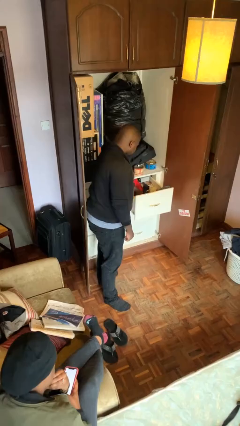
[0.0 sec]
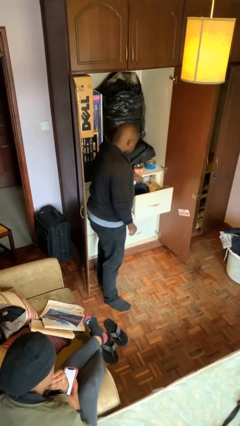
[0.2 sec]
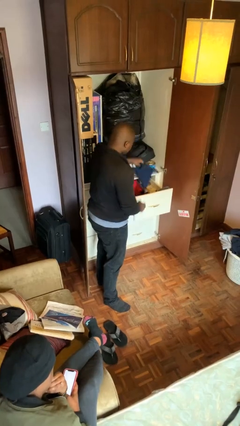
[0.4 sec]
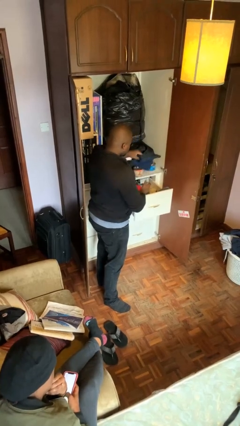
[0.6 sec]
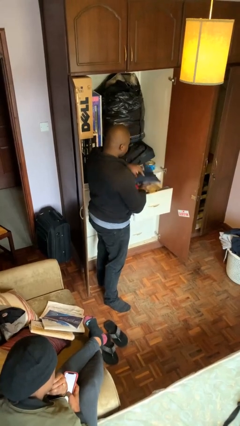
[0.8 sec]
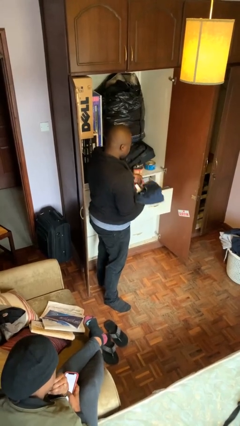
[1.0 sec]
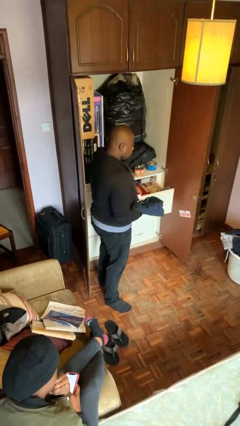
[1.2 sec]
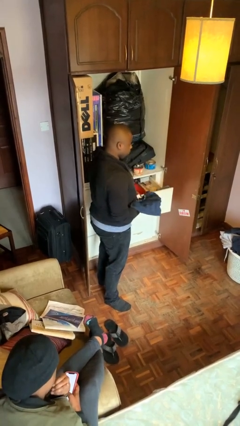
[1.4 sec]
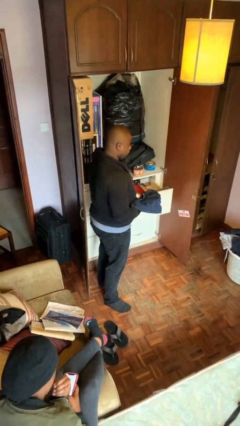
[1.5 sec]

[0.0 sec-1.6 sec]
person takes clothes from dresser

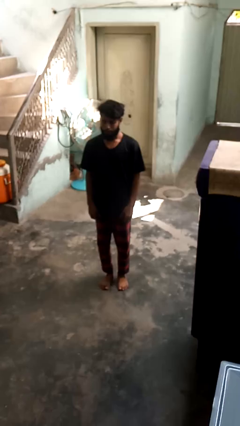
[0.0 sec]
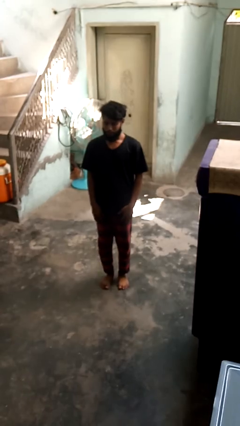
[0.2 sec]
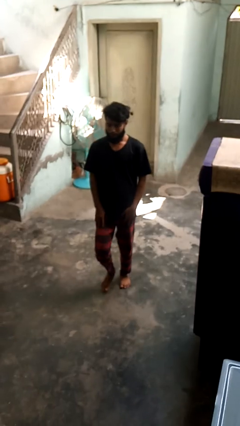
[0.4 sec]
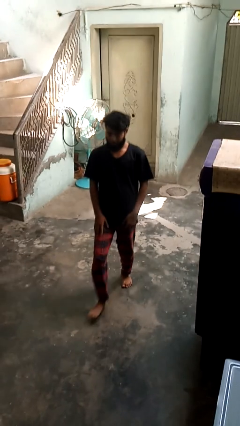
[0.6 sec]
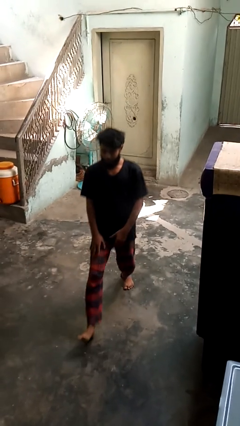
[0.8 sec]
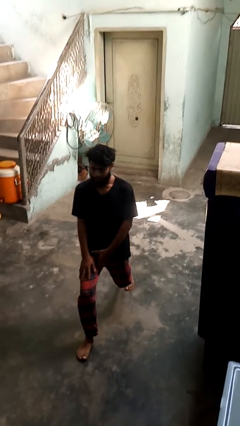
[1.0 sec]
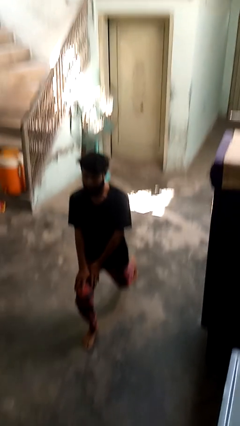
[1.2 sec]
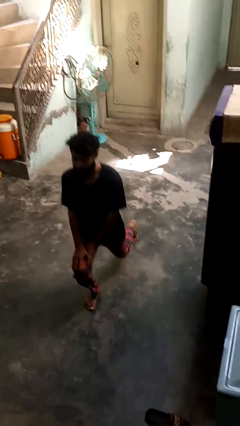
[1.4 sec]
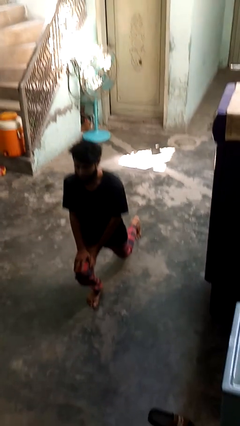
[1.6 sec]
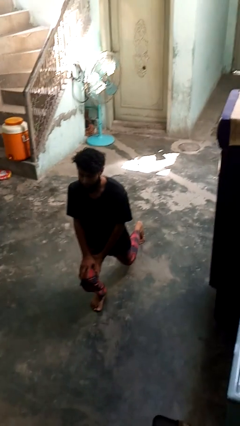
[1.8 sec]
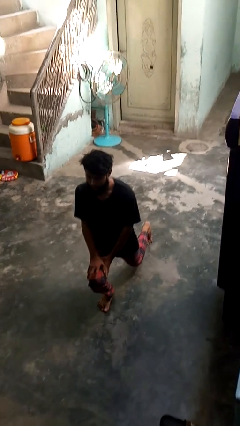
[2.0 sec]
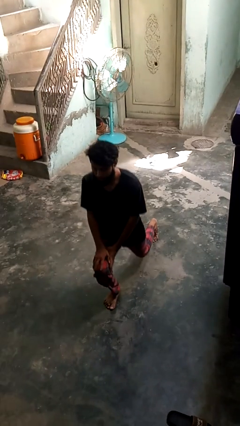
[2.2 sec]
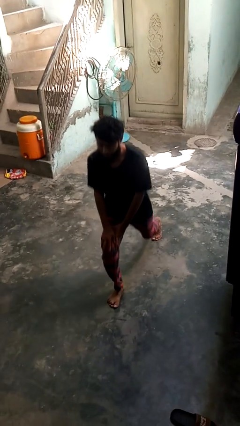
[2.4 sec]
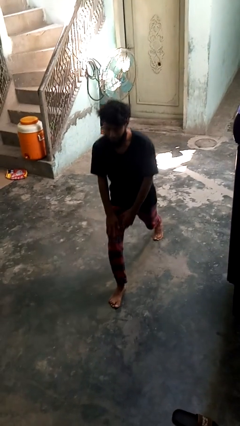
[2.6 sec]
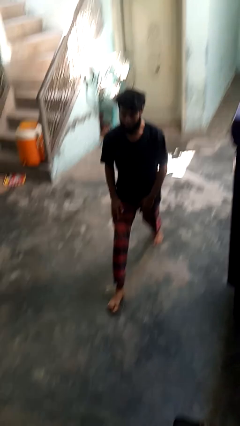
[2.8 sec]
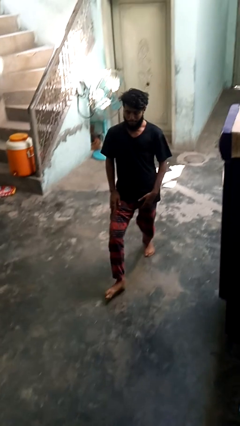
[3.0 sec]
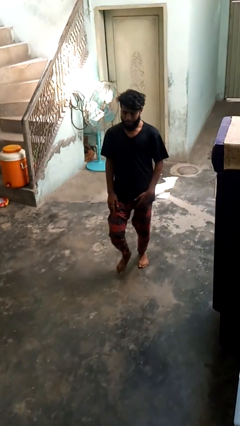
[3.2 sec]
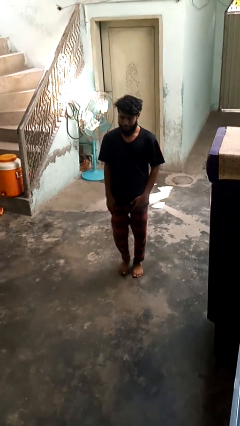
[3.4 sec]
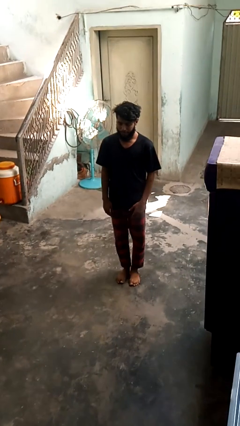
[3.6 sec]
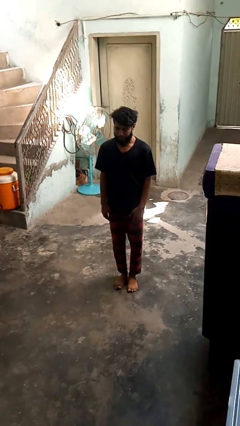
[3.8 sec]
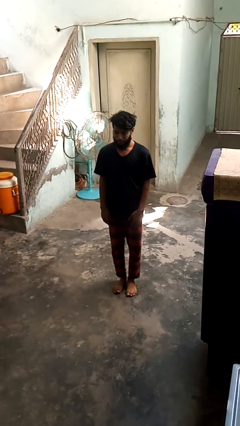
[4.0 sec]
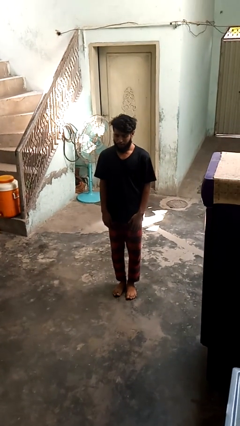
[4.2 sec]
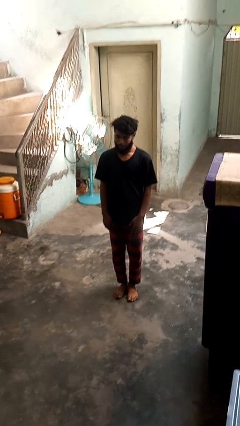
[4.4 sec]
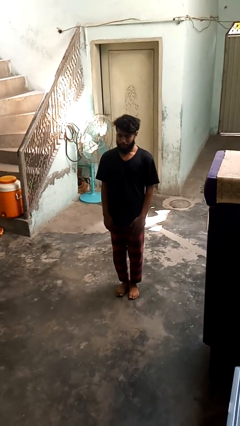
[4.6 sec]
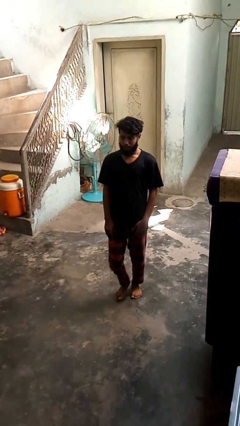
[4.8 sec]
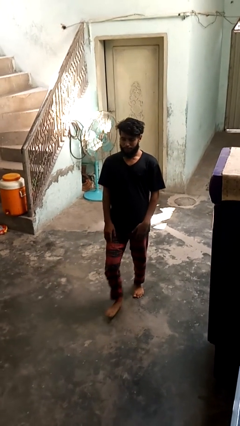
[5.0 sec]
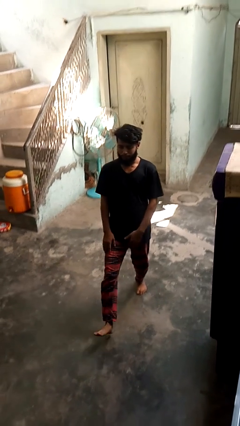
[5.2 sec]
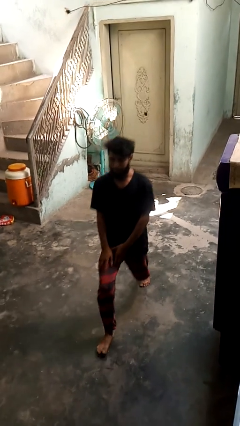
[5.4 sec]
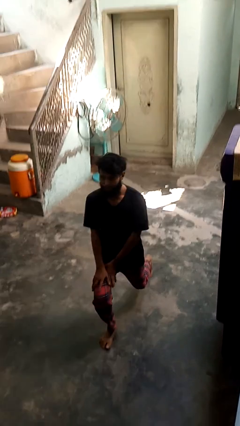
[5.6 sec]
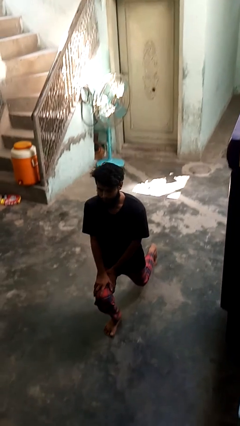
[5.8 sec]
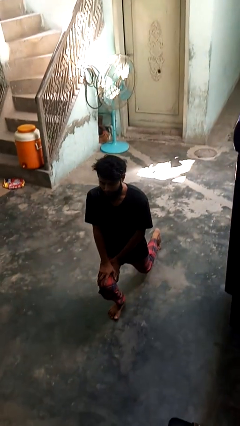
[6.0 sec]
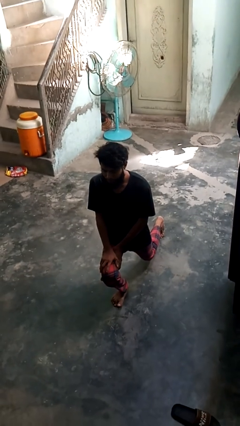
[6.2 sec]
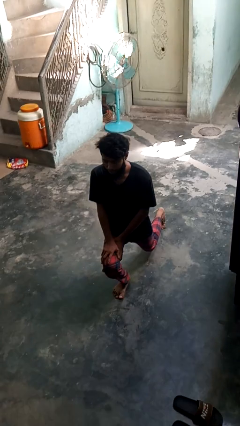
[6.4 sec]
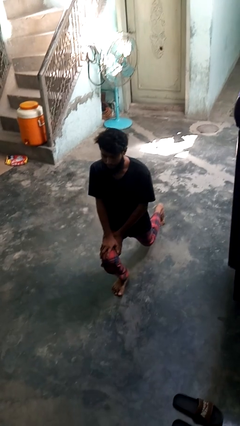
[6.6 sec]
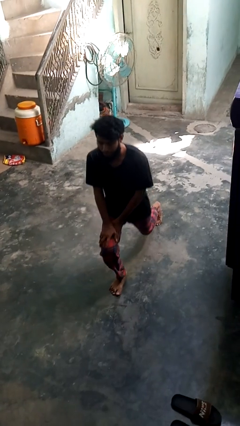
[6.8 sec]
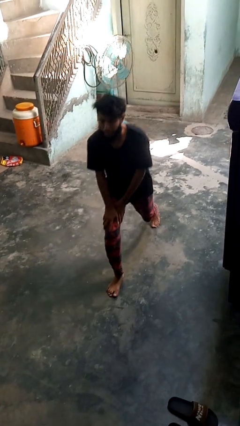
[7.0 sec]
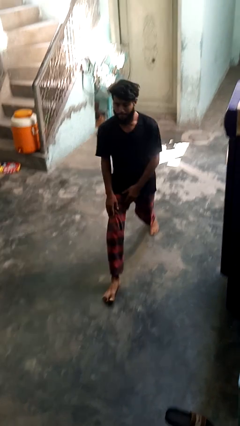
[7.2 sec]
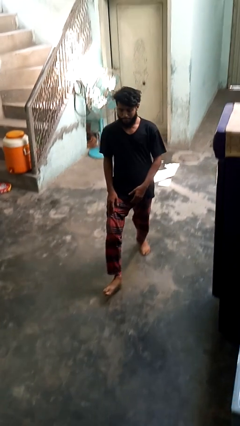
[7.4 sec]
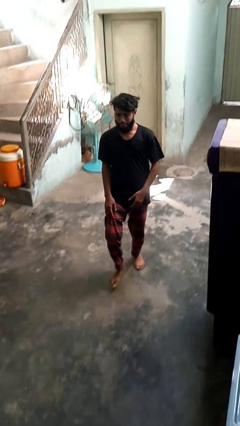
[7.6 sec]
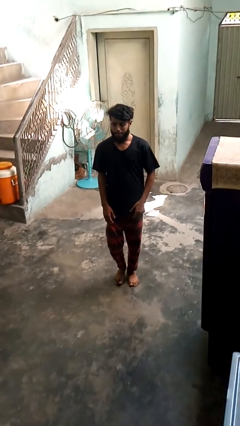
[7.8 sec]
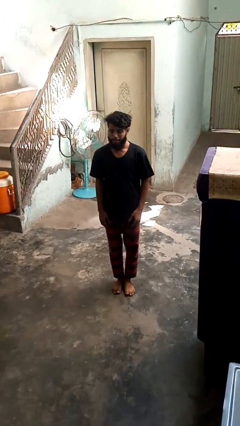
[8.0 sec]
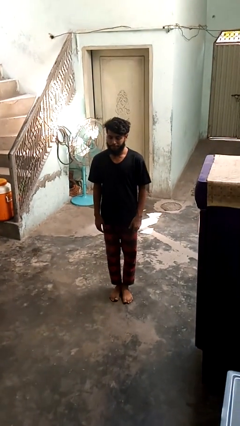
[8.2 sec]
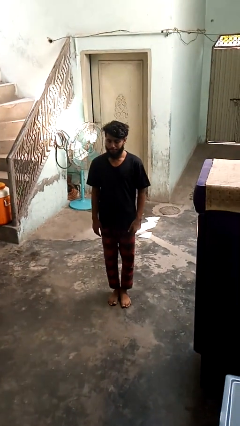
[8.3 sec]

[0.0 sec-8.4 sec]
person exercises with lunges

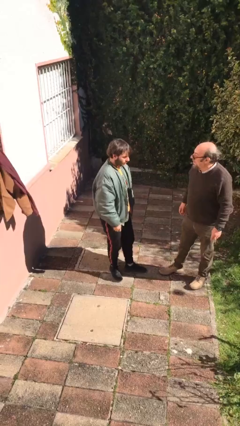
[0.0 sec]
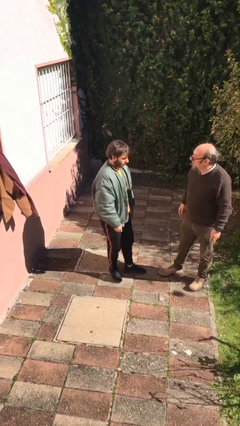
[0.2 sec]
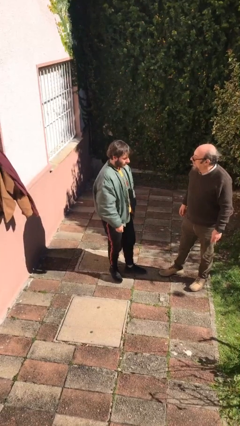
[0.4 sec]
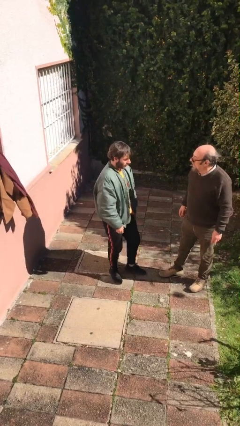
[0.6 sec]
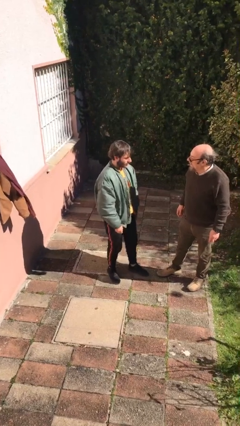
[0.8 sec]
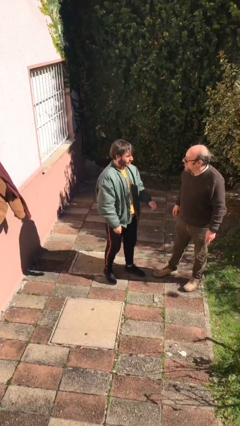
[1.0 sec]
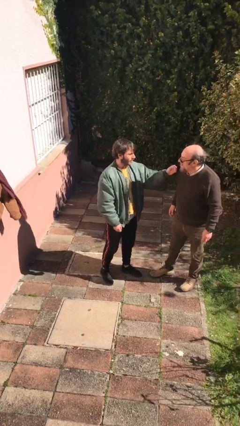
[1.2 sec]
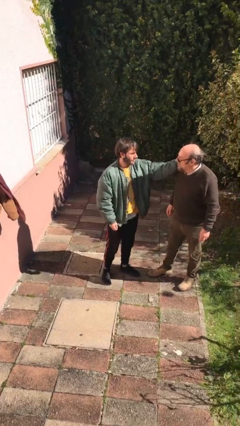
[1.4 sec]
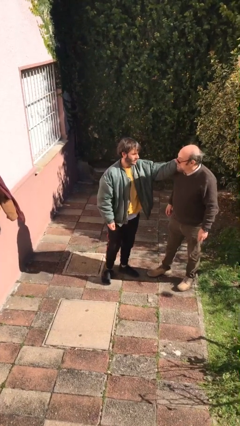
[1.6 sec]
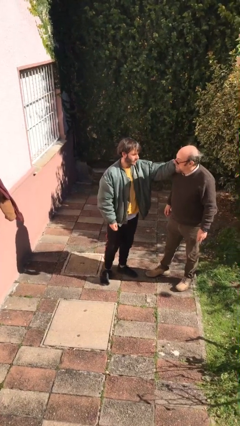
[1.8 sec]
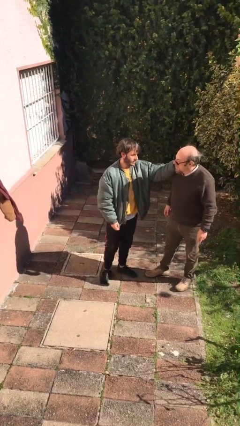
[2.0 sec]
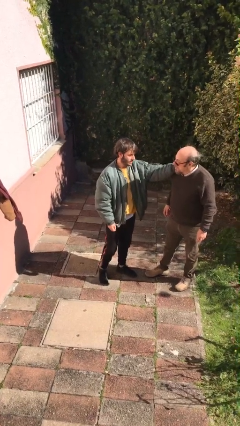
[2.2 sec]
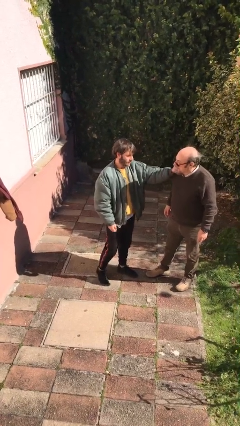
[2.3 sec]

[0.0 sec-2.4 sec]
person touches face of person

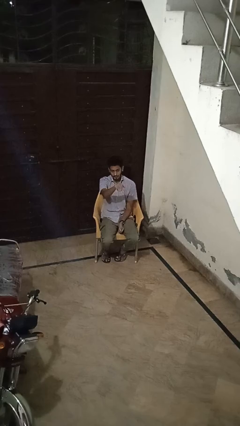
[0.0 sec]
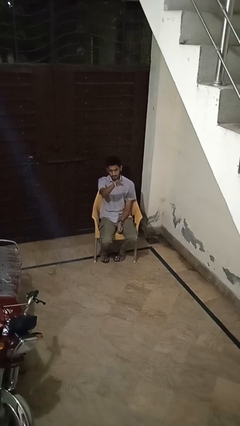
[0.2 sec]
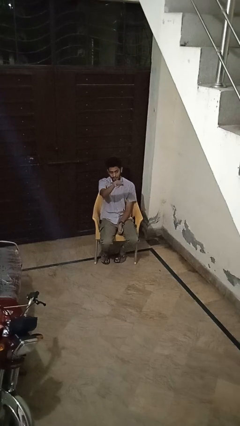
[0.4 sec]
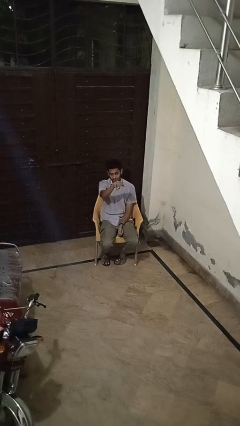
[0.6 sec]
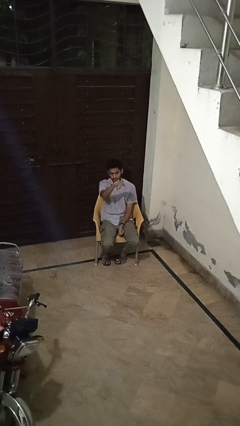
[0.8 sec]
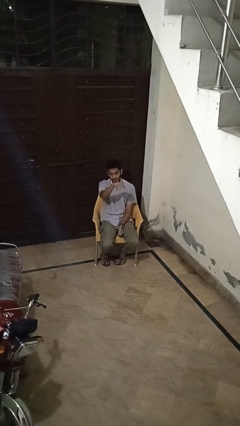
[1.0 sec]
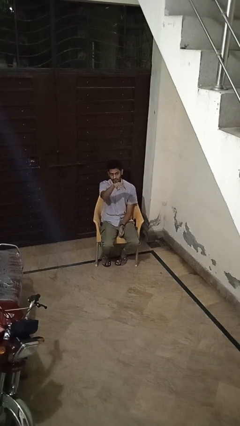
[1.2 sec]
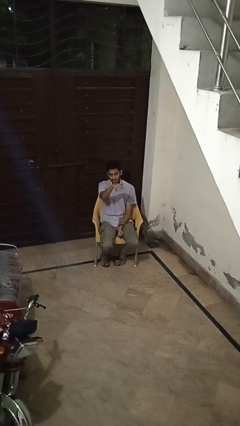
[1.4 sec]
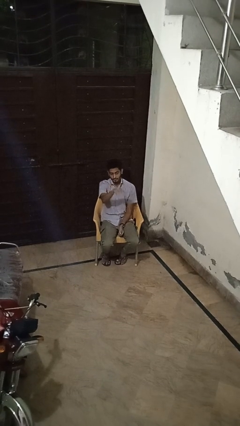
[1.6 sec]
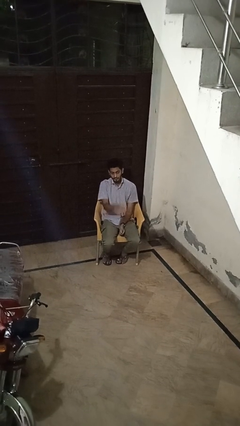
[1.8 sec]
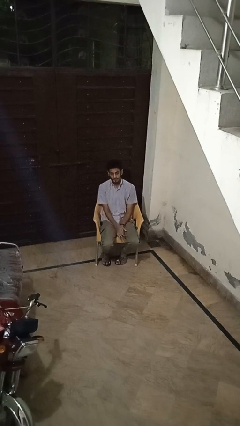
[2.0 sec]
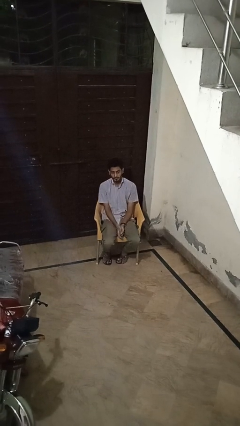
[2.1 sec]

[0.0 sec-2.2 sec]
person gestures come here

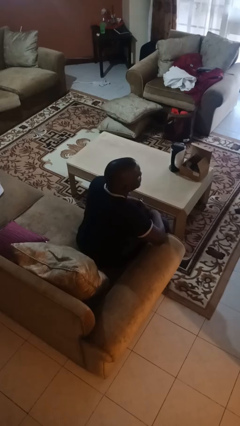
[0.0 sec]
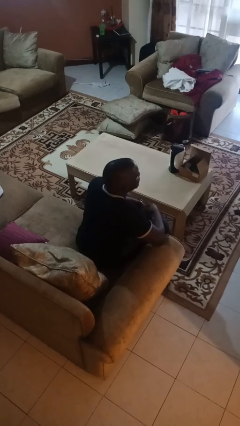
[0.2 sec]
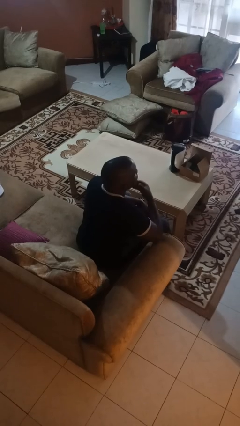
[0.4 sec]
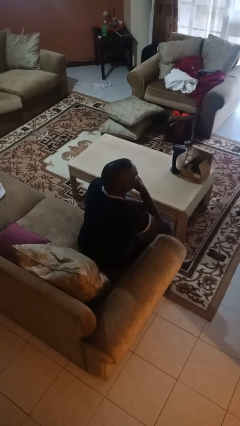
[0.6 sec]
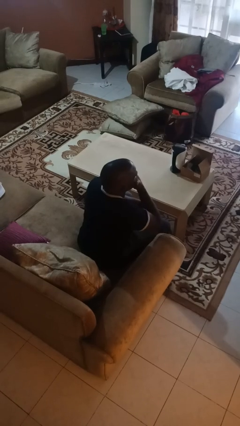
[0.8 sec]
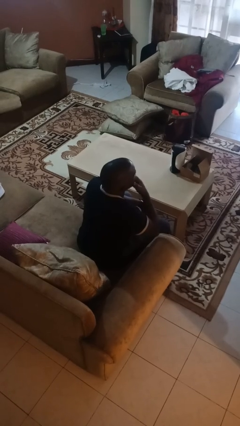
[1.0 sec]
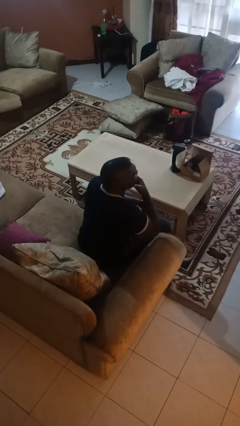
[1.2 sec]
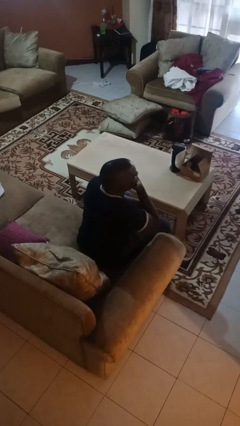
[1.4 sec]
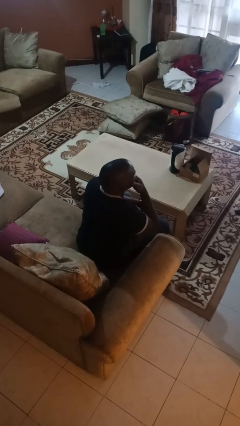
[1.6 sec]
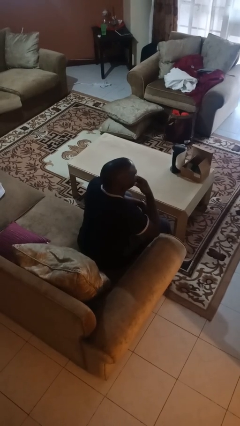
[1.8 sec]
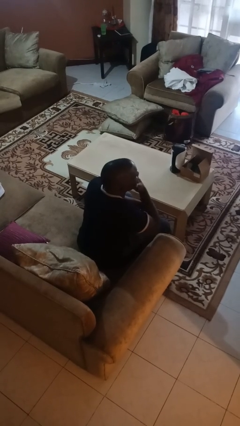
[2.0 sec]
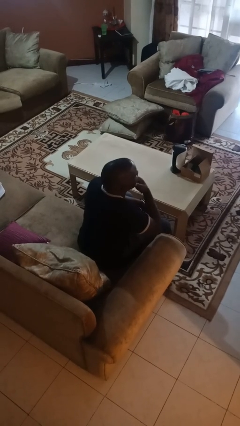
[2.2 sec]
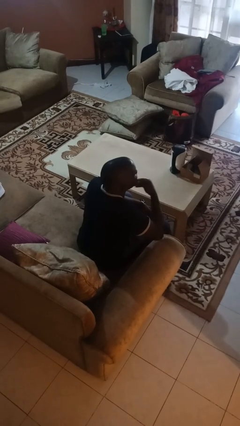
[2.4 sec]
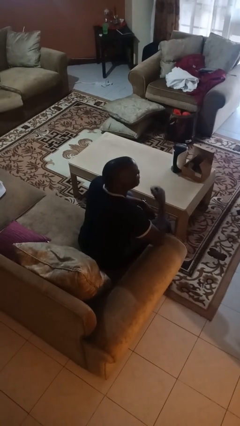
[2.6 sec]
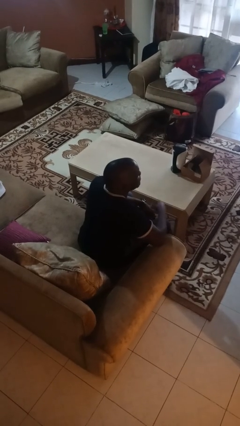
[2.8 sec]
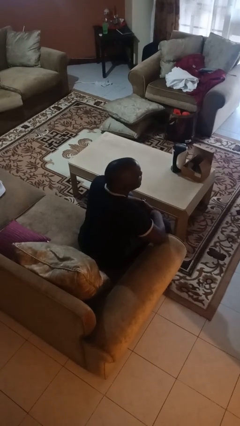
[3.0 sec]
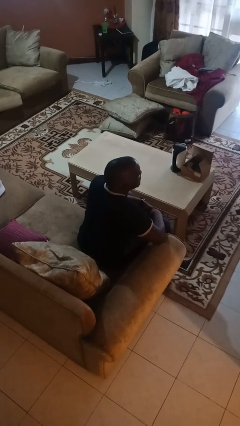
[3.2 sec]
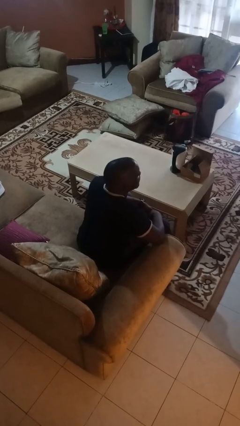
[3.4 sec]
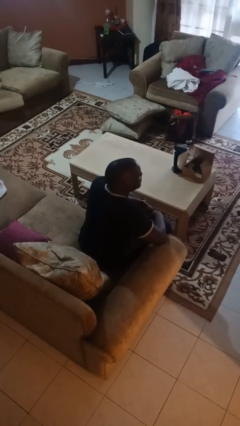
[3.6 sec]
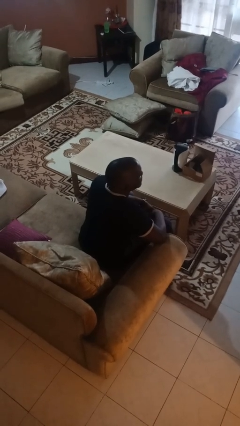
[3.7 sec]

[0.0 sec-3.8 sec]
person strokes chin
